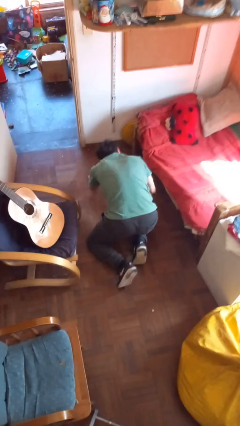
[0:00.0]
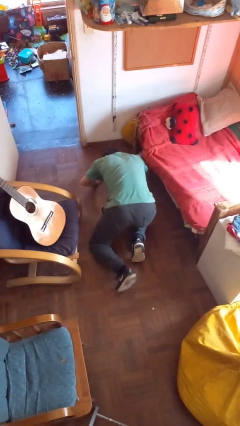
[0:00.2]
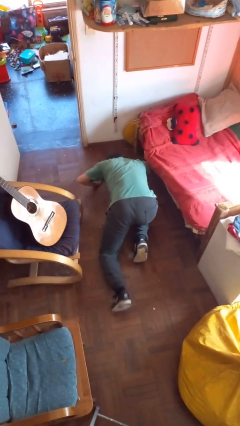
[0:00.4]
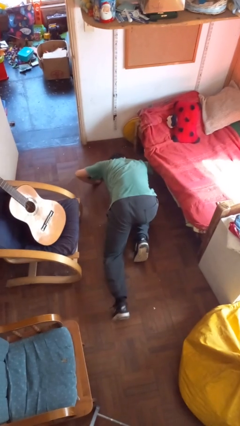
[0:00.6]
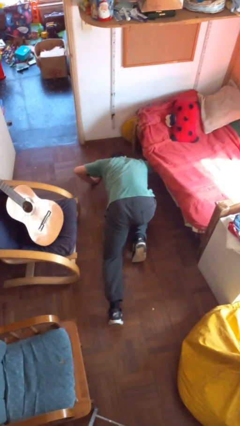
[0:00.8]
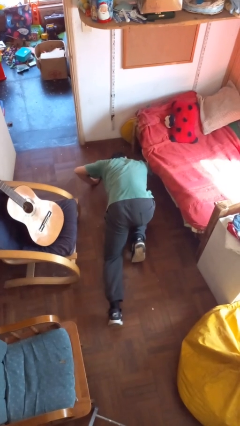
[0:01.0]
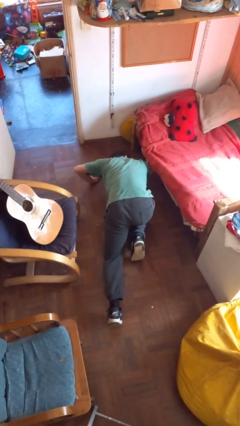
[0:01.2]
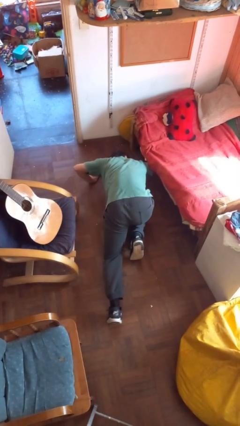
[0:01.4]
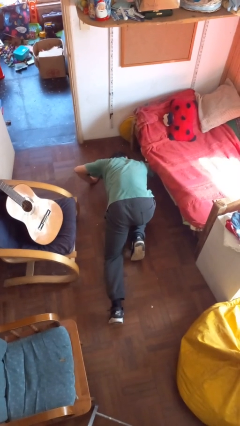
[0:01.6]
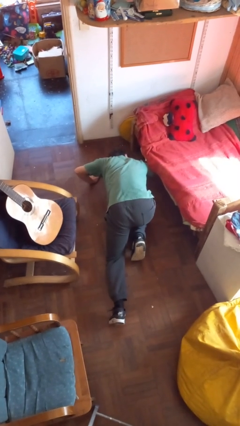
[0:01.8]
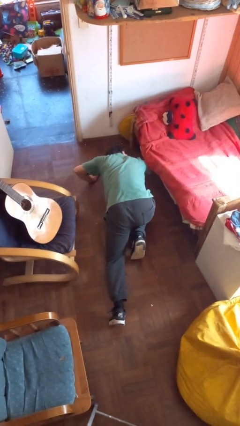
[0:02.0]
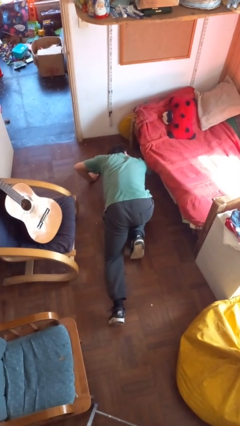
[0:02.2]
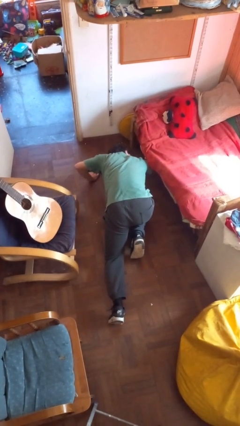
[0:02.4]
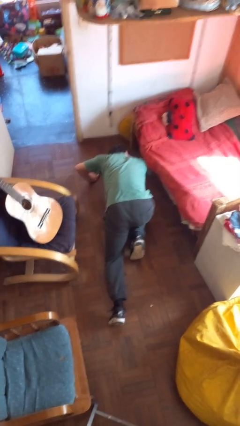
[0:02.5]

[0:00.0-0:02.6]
person searches under bed

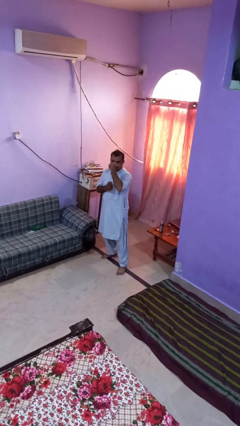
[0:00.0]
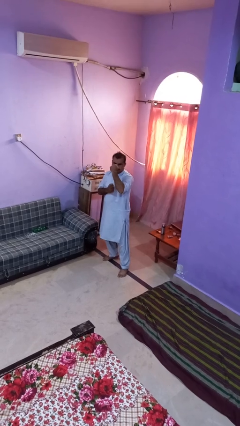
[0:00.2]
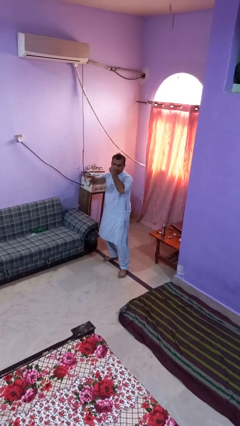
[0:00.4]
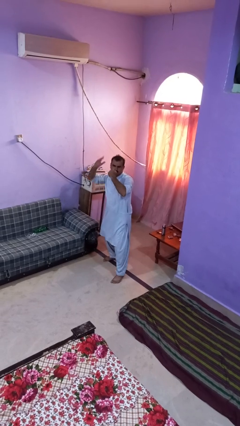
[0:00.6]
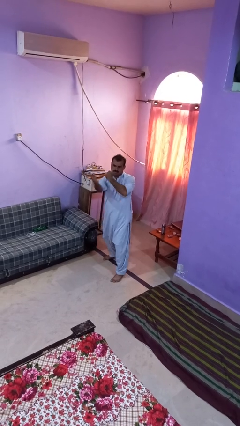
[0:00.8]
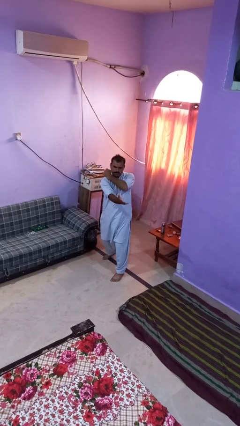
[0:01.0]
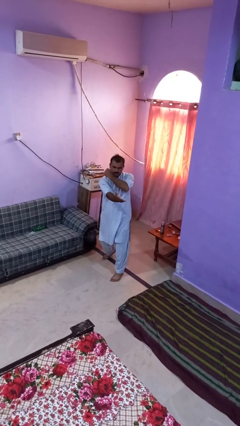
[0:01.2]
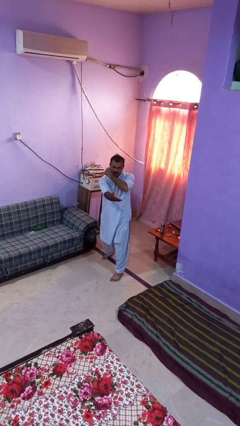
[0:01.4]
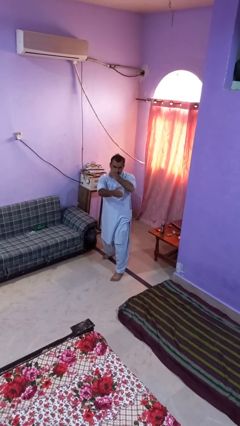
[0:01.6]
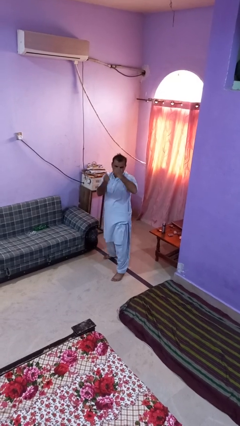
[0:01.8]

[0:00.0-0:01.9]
person karate chop

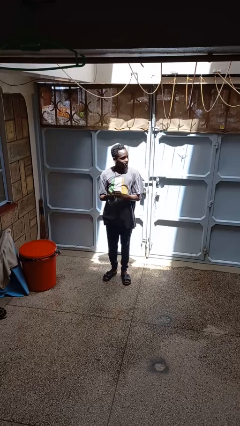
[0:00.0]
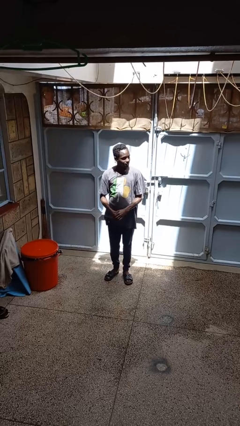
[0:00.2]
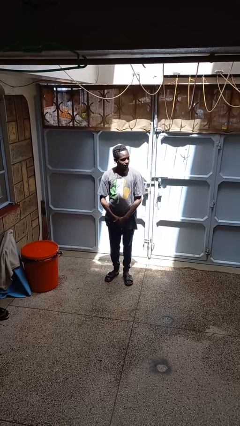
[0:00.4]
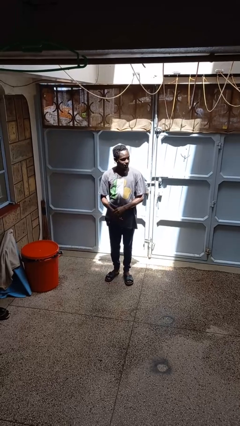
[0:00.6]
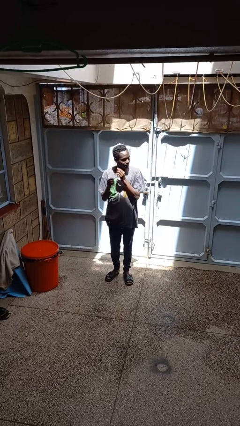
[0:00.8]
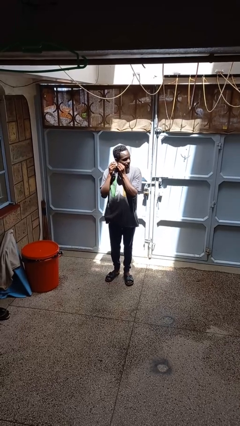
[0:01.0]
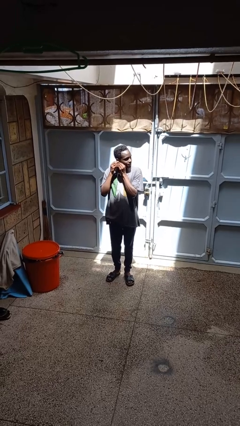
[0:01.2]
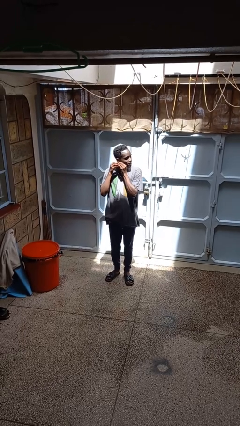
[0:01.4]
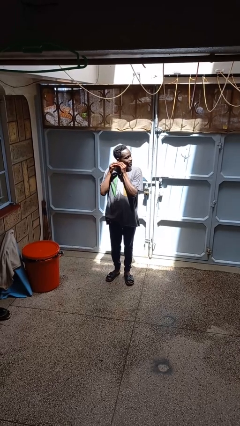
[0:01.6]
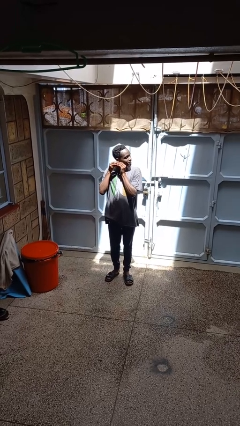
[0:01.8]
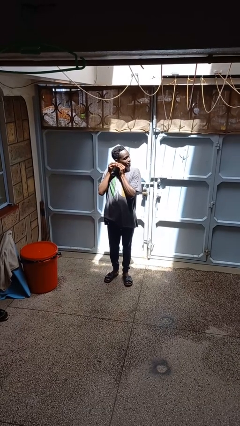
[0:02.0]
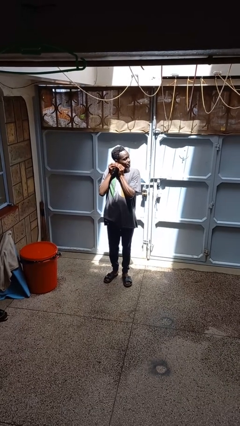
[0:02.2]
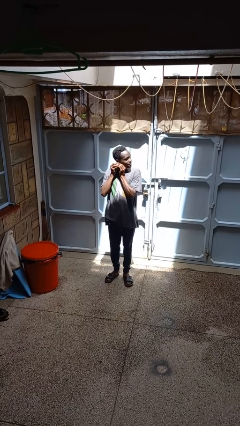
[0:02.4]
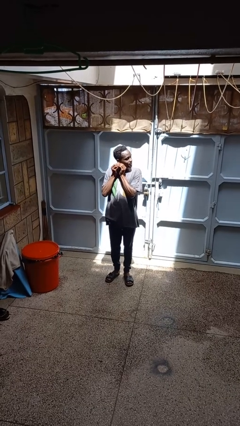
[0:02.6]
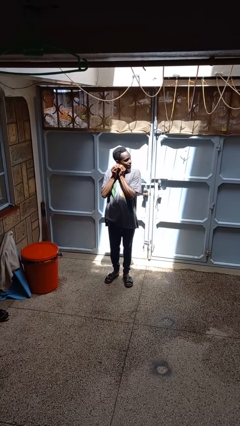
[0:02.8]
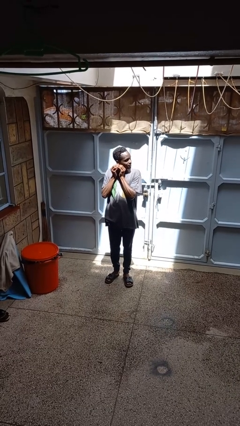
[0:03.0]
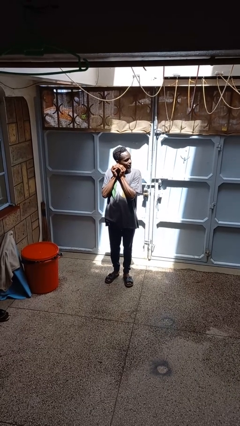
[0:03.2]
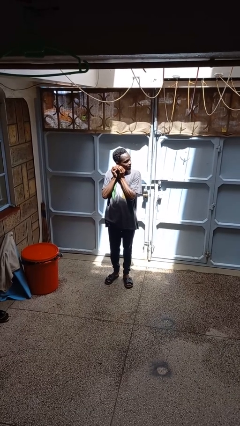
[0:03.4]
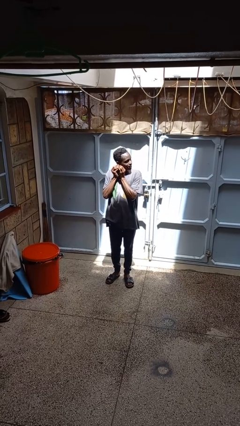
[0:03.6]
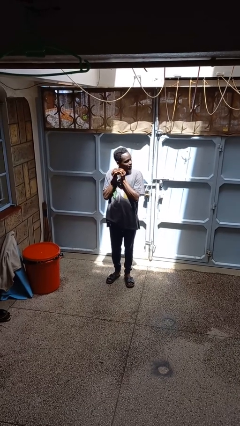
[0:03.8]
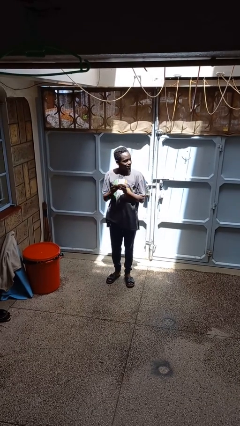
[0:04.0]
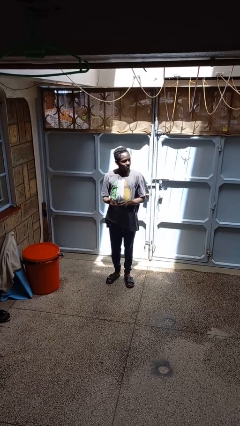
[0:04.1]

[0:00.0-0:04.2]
person takes off earrings

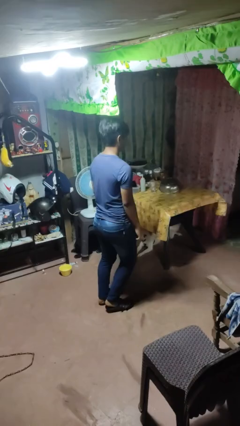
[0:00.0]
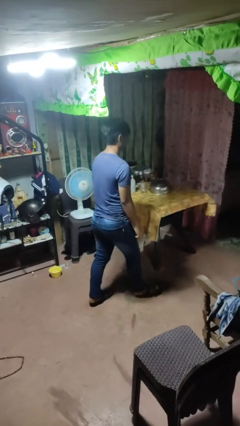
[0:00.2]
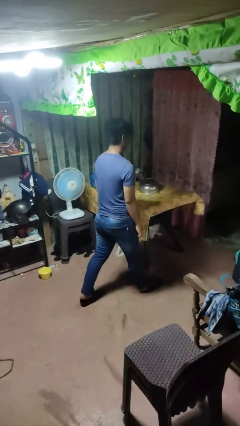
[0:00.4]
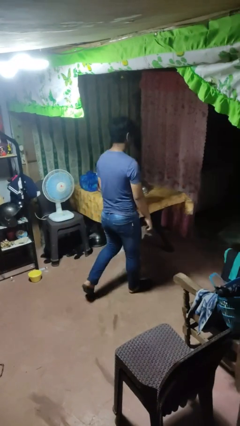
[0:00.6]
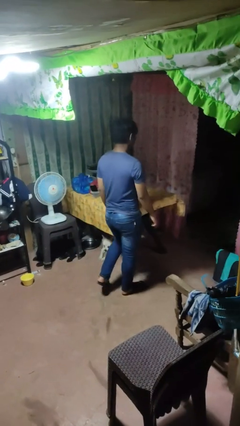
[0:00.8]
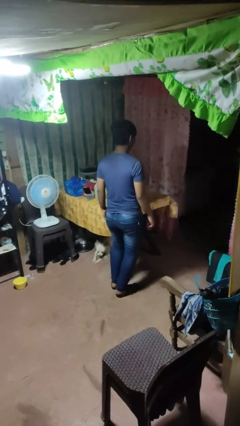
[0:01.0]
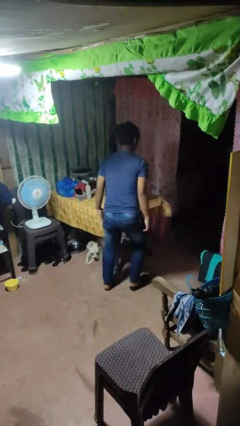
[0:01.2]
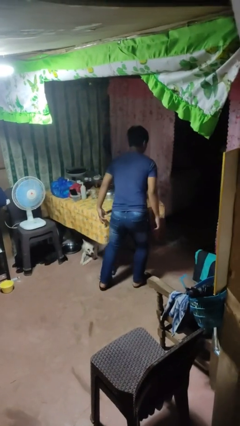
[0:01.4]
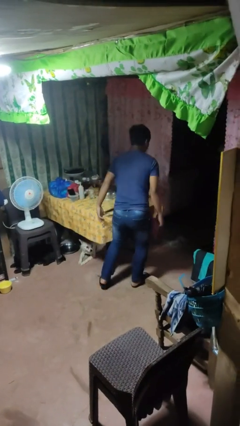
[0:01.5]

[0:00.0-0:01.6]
person bumps into table

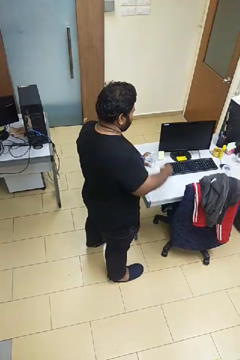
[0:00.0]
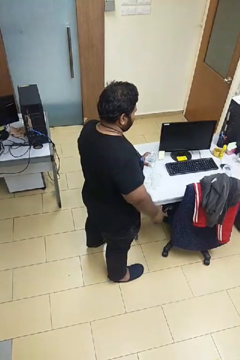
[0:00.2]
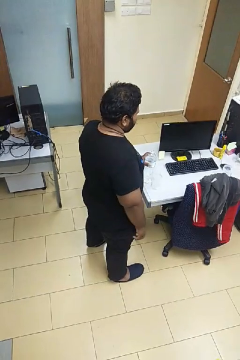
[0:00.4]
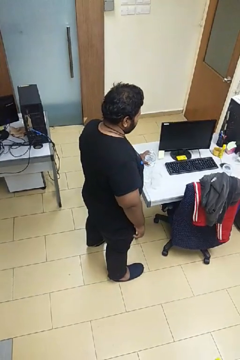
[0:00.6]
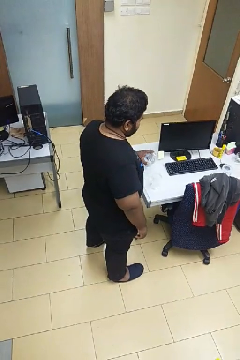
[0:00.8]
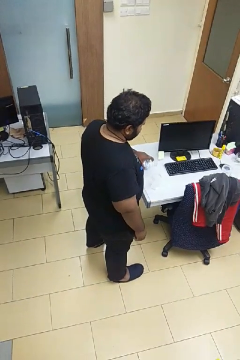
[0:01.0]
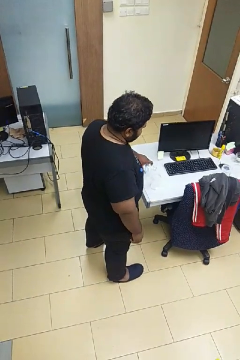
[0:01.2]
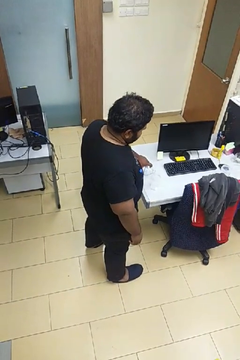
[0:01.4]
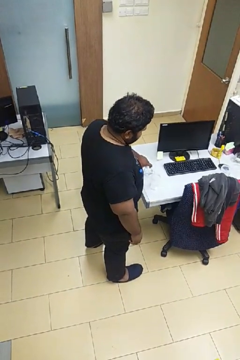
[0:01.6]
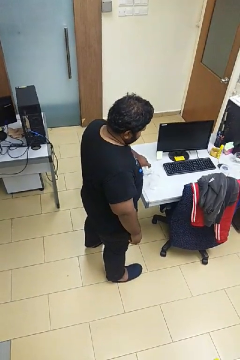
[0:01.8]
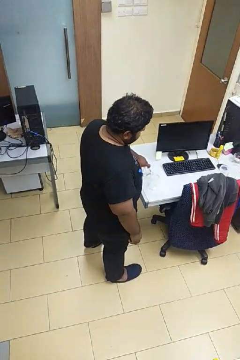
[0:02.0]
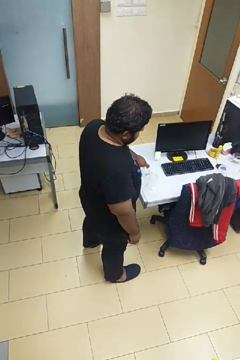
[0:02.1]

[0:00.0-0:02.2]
person pours liquid into cup

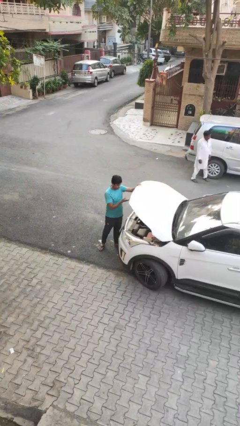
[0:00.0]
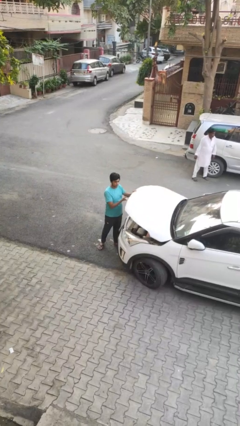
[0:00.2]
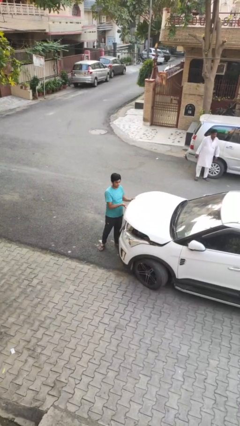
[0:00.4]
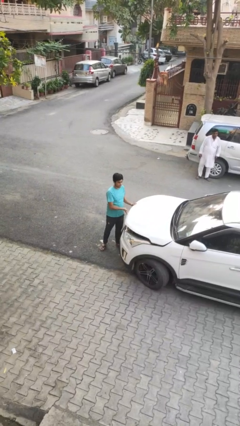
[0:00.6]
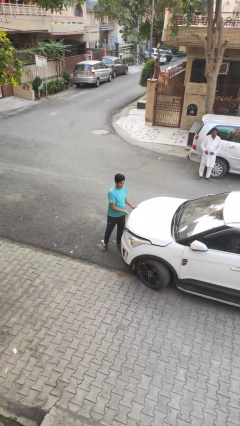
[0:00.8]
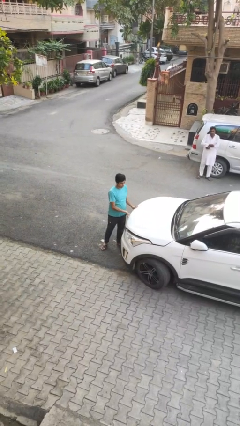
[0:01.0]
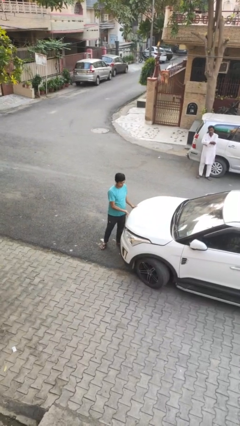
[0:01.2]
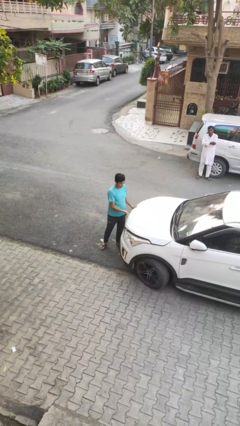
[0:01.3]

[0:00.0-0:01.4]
person closes car hood

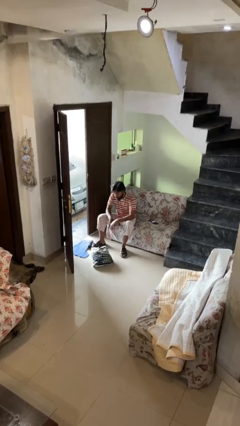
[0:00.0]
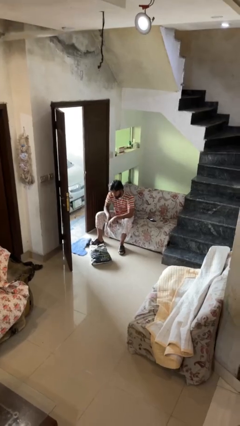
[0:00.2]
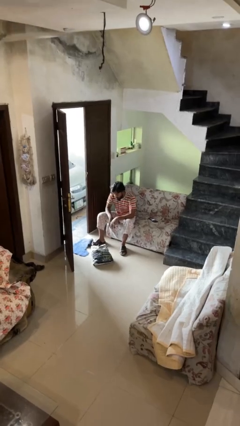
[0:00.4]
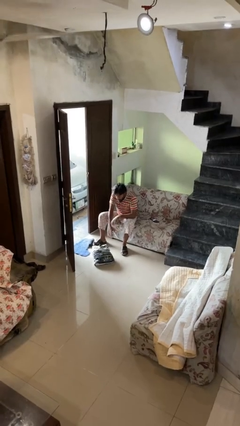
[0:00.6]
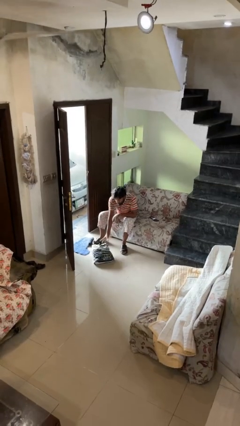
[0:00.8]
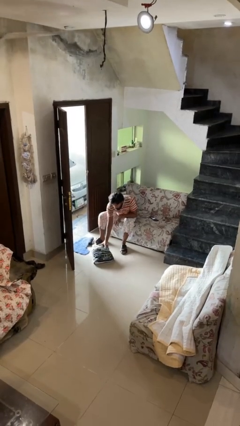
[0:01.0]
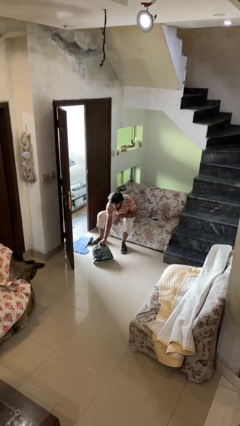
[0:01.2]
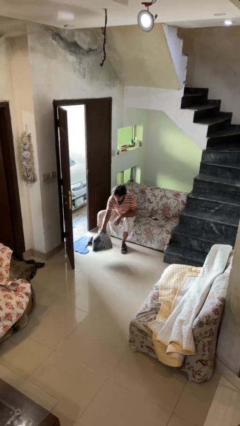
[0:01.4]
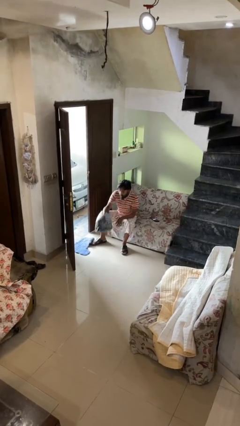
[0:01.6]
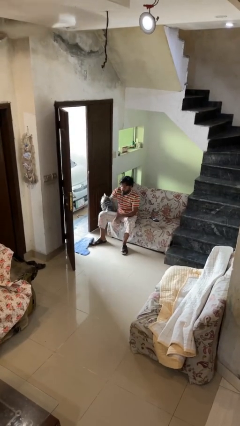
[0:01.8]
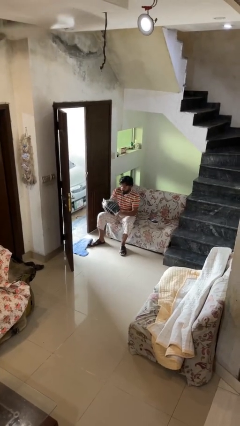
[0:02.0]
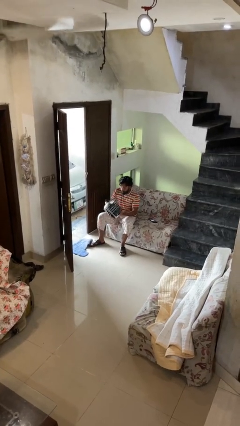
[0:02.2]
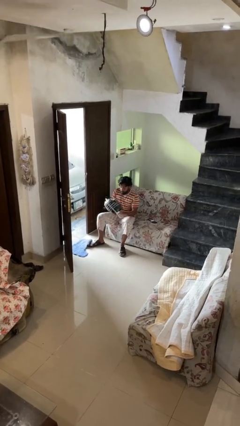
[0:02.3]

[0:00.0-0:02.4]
person picks up object from floor

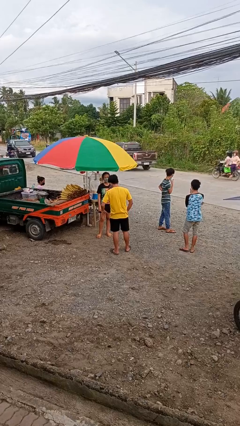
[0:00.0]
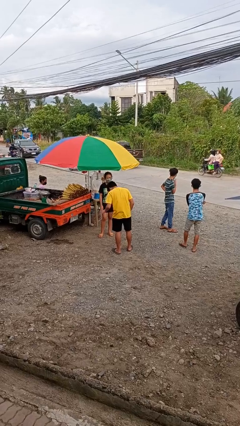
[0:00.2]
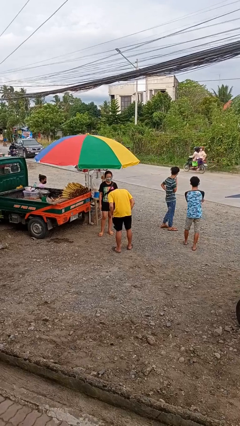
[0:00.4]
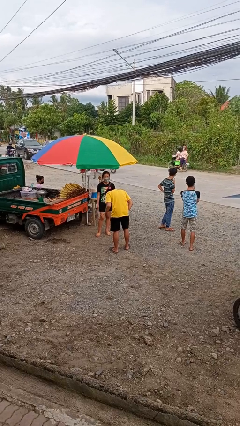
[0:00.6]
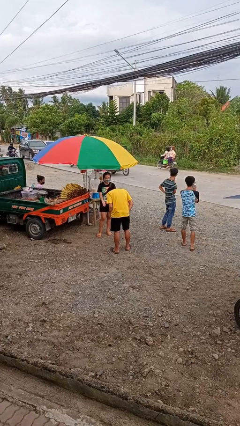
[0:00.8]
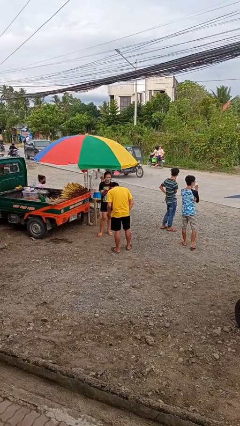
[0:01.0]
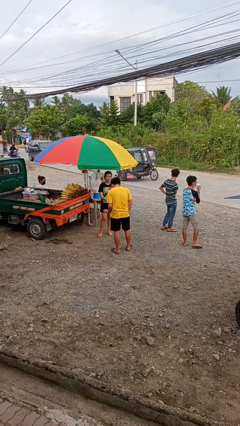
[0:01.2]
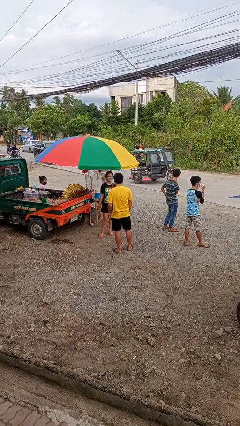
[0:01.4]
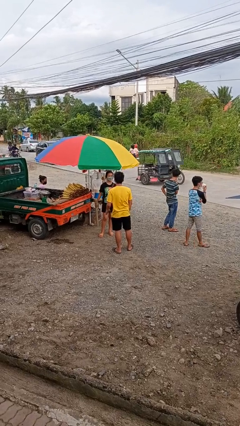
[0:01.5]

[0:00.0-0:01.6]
person laughs with person
